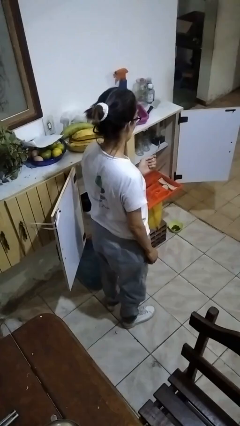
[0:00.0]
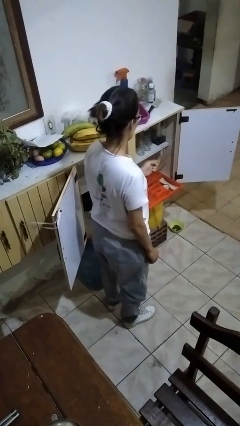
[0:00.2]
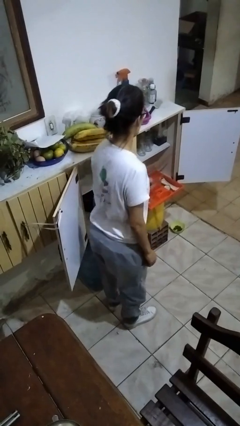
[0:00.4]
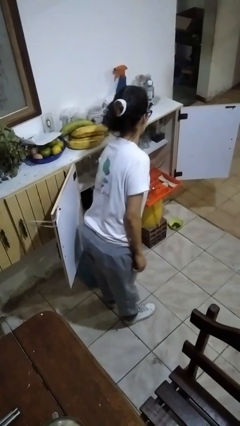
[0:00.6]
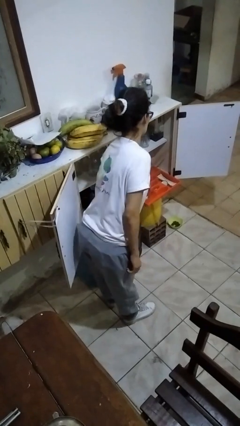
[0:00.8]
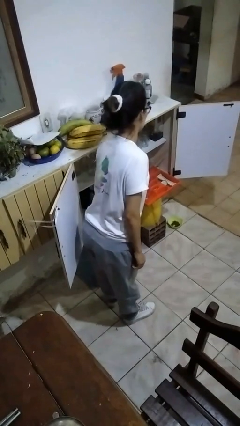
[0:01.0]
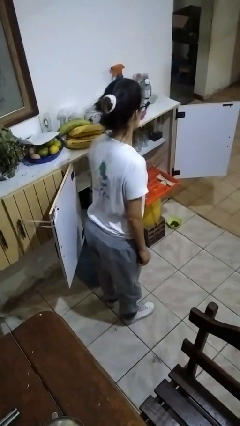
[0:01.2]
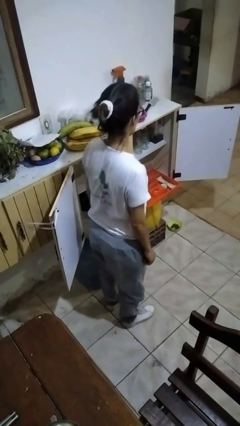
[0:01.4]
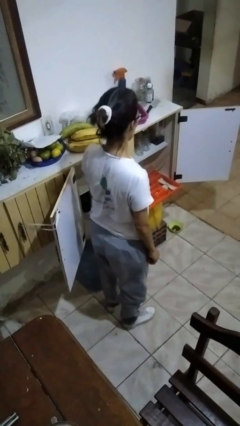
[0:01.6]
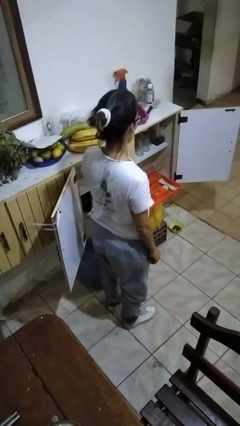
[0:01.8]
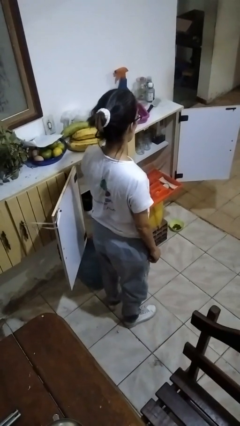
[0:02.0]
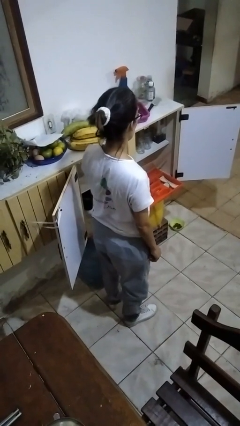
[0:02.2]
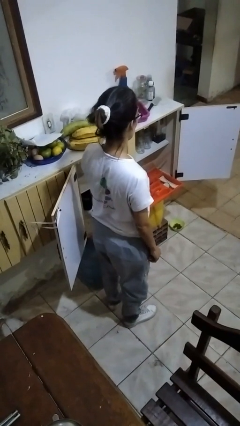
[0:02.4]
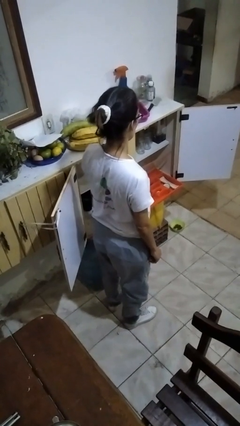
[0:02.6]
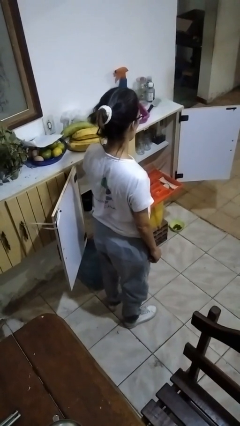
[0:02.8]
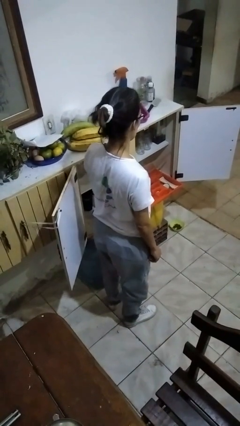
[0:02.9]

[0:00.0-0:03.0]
person puts object into kitchen drawer

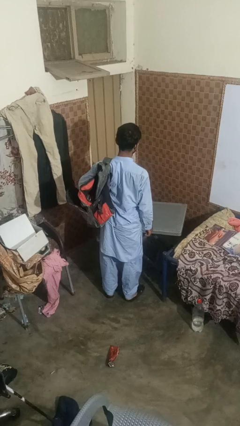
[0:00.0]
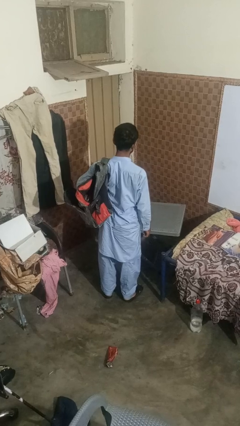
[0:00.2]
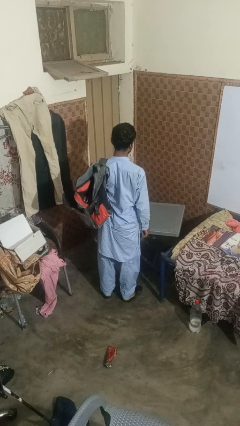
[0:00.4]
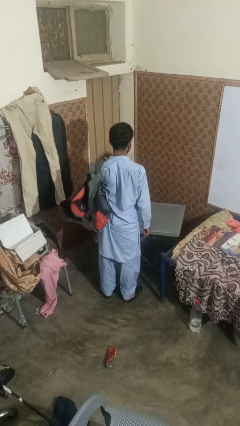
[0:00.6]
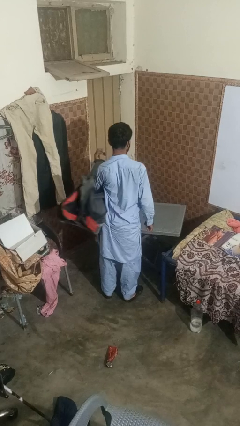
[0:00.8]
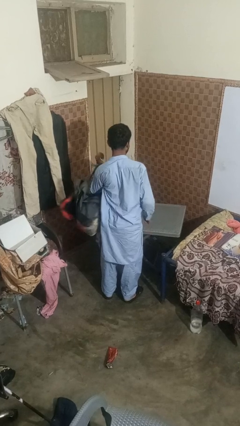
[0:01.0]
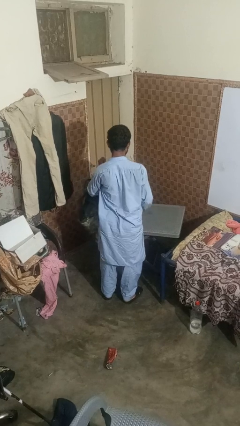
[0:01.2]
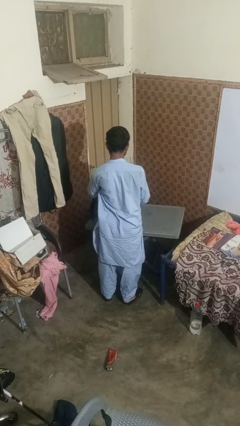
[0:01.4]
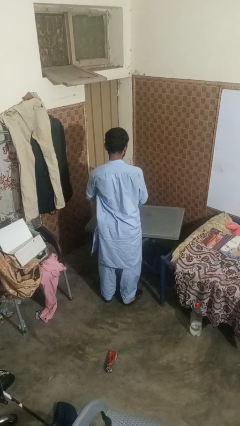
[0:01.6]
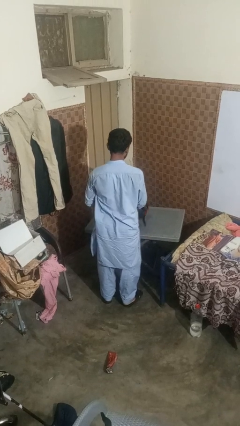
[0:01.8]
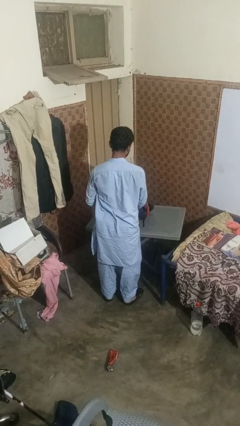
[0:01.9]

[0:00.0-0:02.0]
person takes off backpack

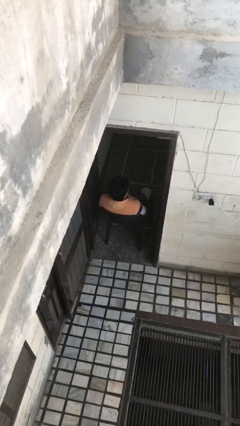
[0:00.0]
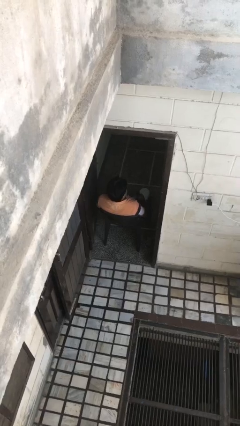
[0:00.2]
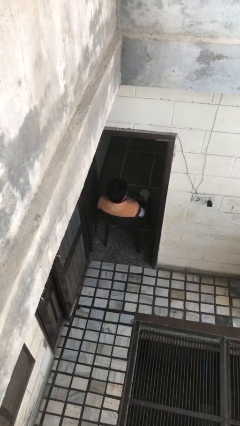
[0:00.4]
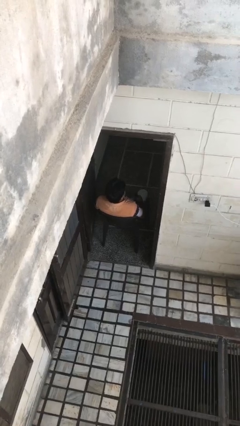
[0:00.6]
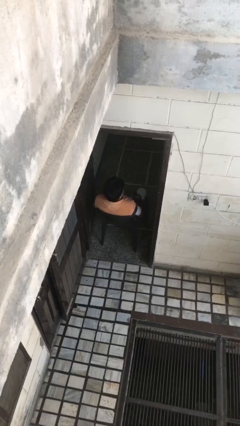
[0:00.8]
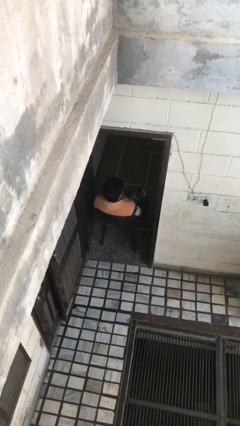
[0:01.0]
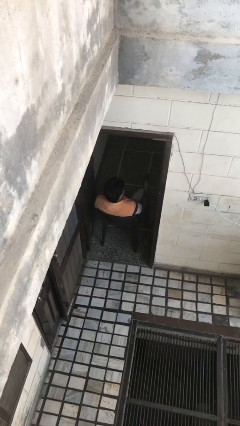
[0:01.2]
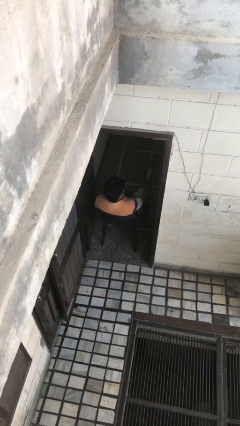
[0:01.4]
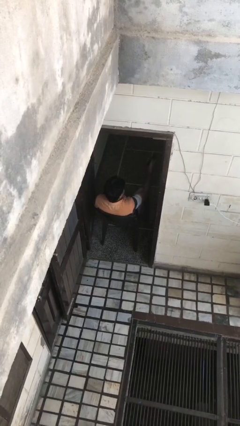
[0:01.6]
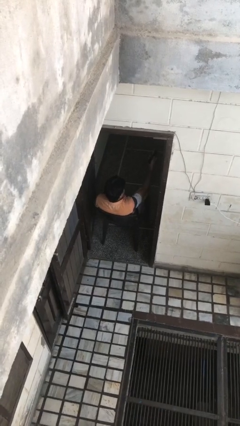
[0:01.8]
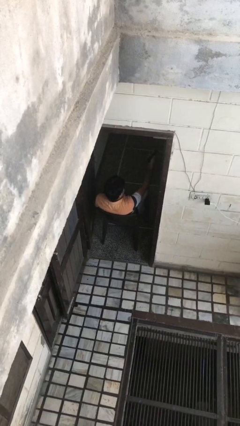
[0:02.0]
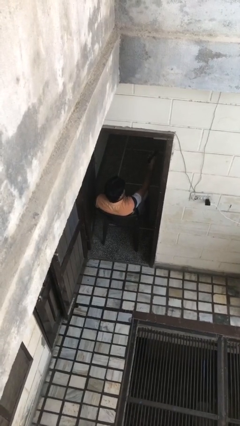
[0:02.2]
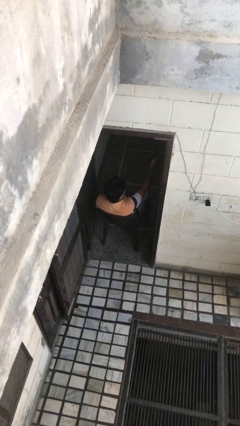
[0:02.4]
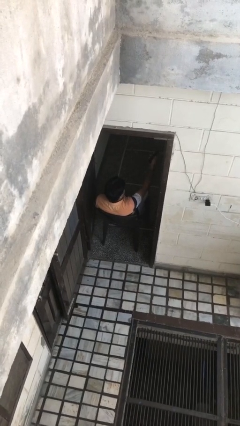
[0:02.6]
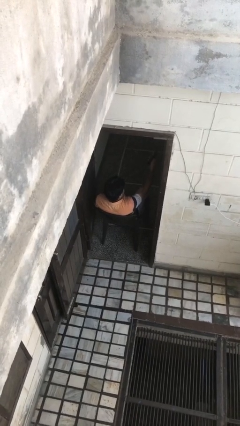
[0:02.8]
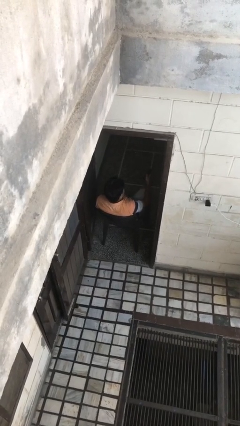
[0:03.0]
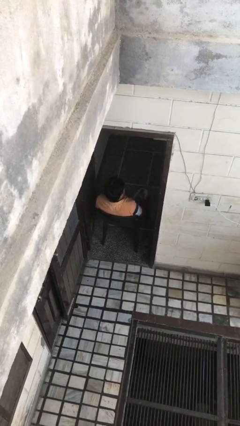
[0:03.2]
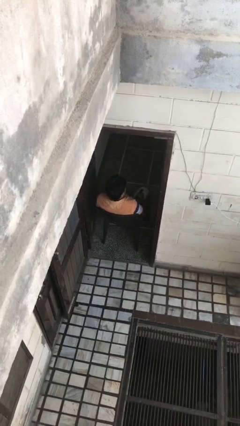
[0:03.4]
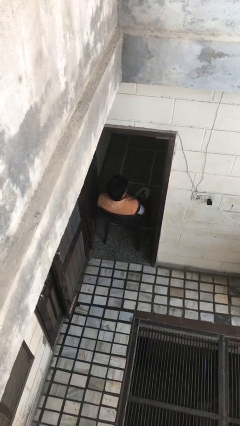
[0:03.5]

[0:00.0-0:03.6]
person uses television remote

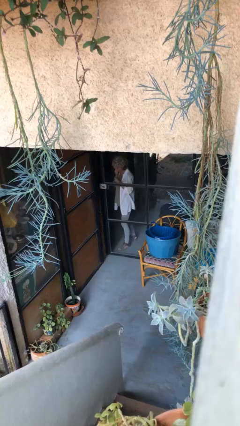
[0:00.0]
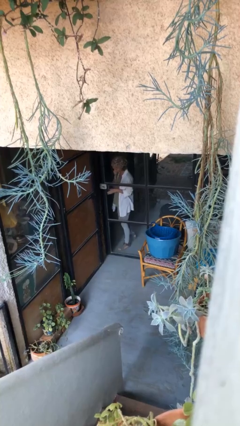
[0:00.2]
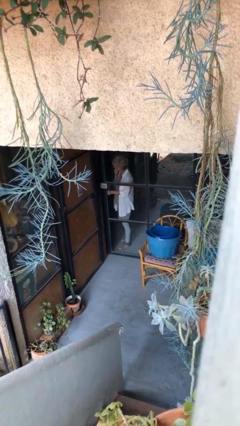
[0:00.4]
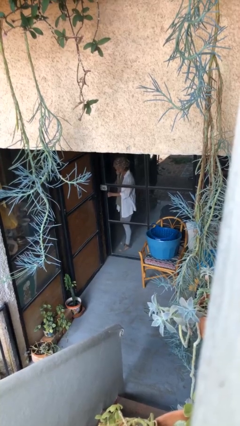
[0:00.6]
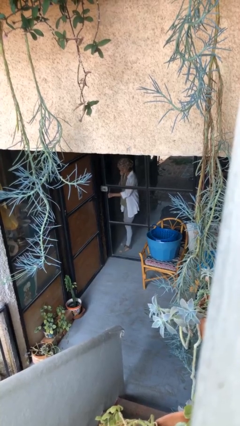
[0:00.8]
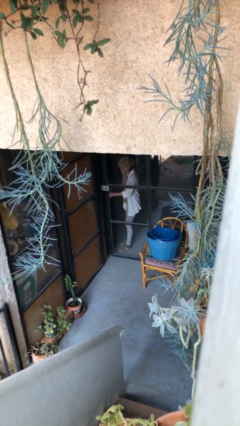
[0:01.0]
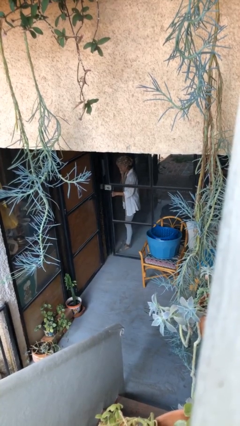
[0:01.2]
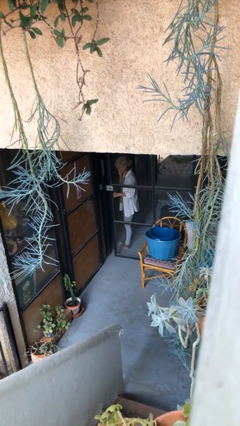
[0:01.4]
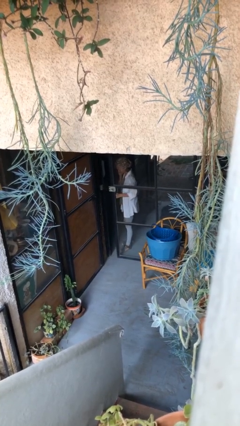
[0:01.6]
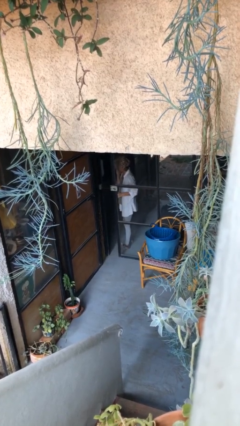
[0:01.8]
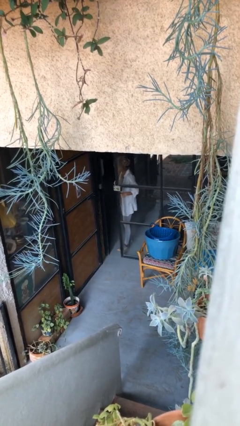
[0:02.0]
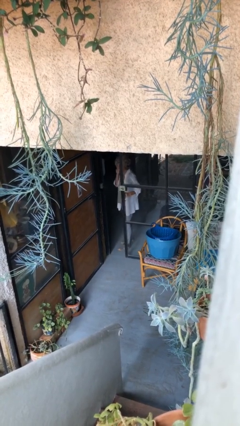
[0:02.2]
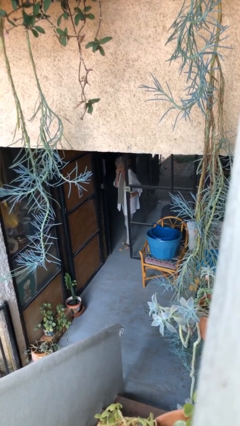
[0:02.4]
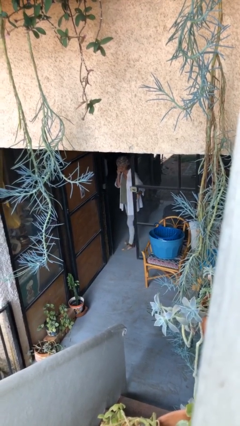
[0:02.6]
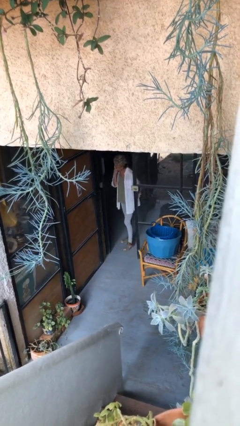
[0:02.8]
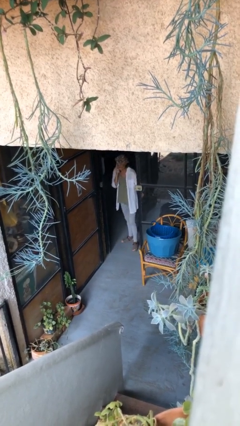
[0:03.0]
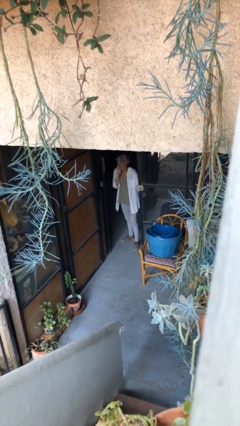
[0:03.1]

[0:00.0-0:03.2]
person opens facility door

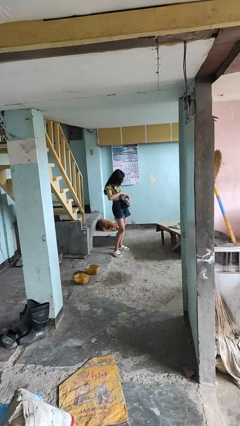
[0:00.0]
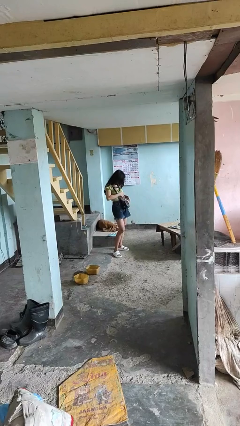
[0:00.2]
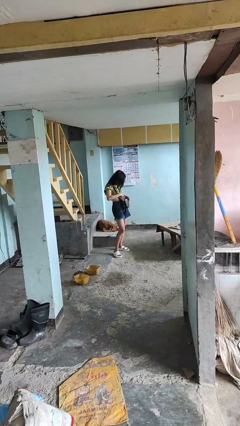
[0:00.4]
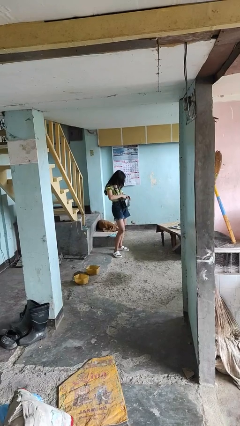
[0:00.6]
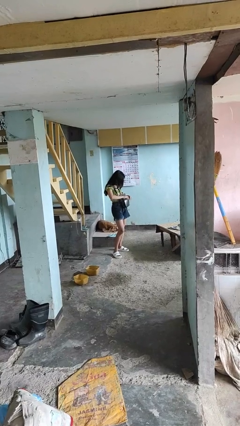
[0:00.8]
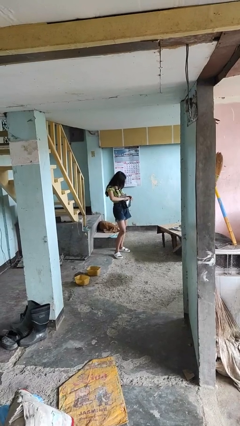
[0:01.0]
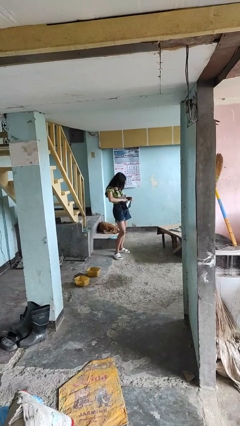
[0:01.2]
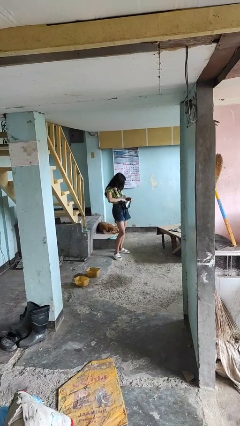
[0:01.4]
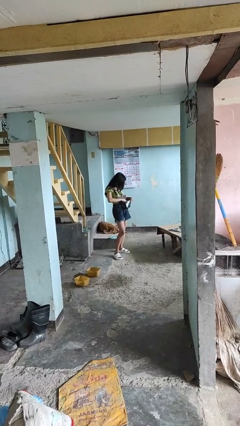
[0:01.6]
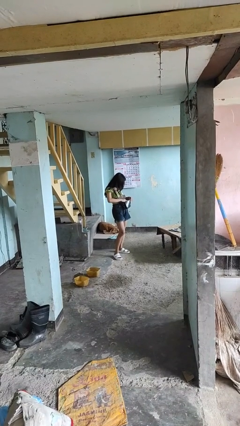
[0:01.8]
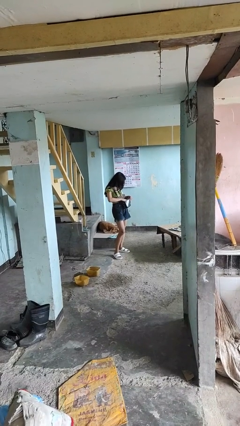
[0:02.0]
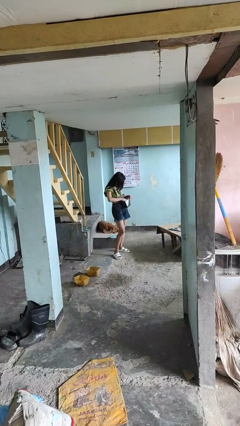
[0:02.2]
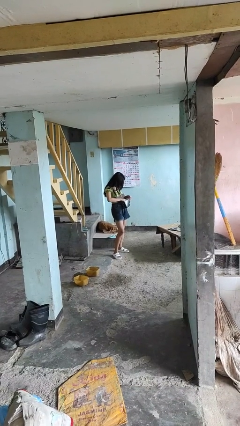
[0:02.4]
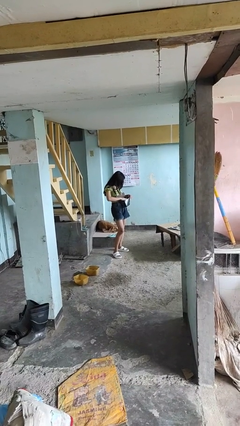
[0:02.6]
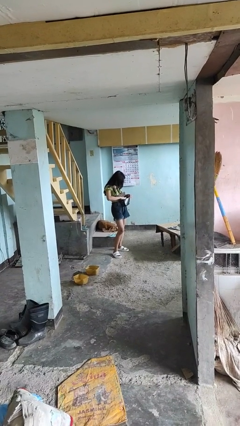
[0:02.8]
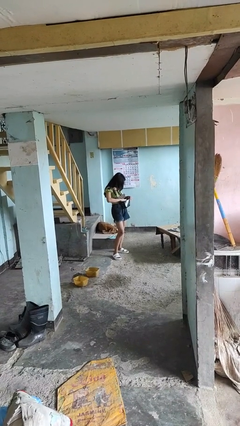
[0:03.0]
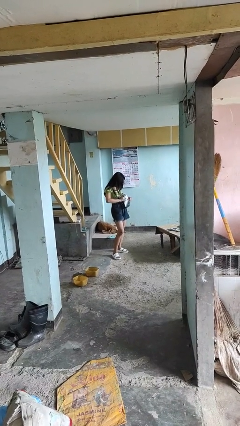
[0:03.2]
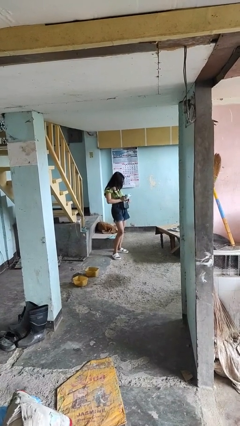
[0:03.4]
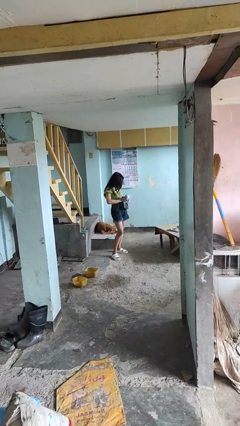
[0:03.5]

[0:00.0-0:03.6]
person searches in purse

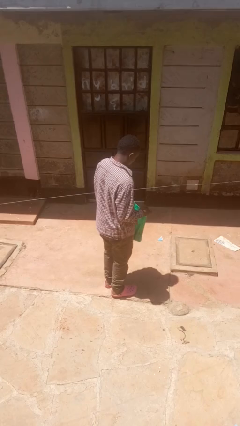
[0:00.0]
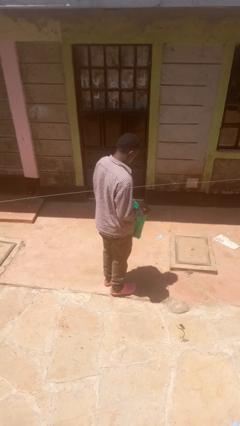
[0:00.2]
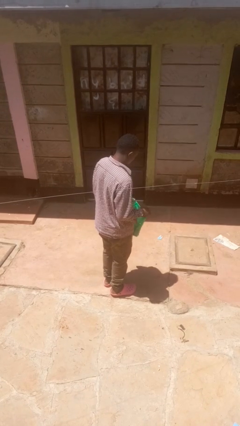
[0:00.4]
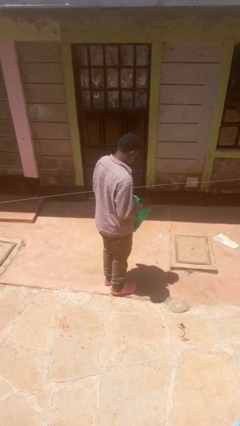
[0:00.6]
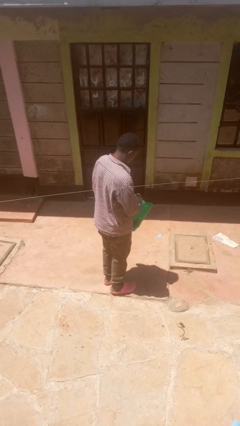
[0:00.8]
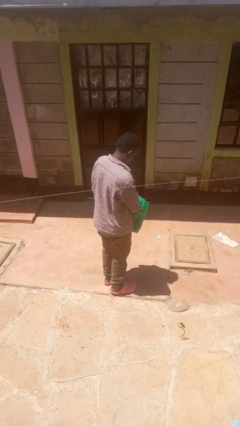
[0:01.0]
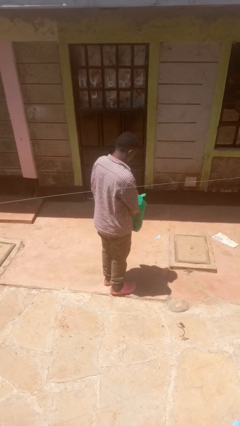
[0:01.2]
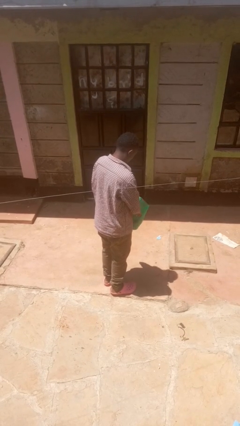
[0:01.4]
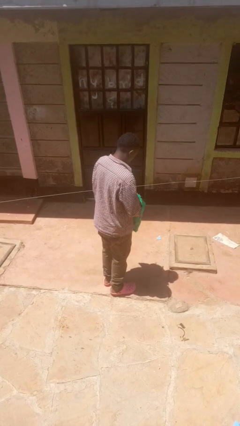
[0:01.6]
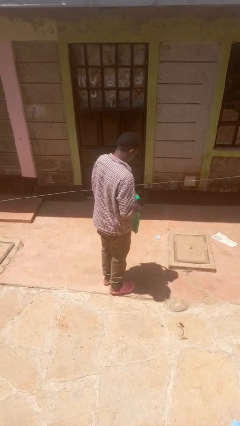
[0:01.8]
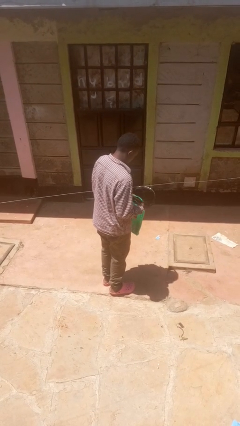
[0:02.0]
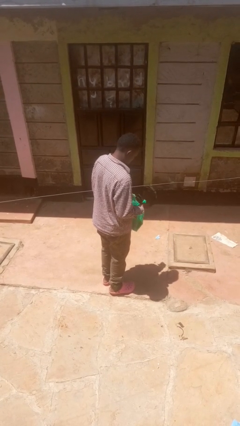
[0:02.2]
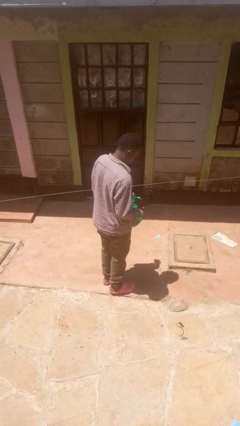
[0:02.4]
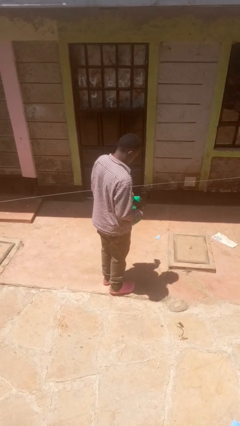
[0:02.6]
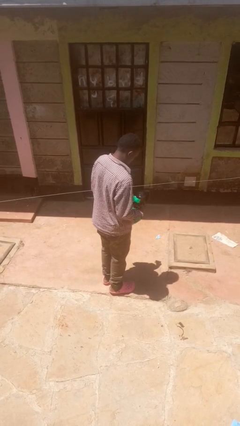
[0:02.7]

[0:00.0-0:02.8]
person takes object from bag
